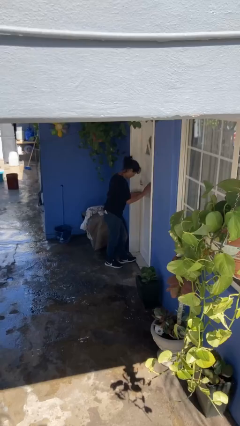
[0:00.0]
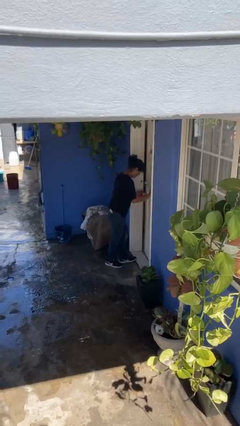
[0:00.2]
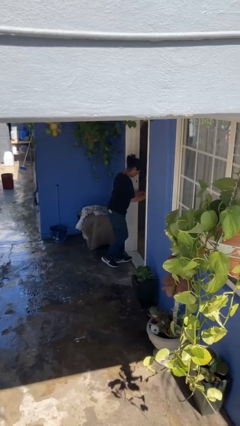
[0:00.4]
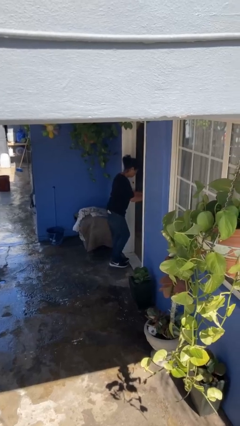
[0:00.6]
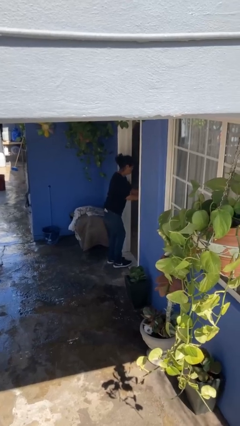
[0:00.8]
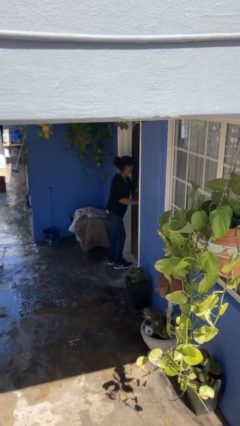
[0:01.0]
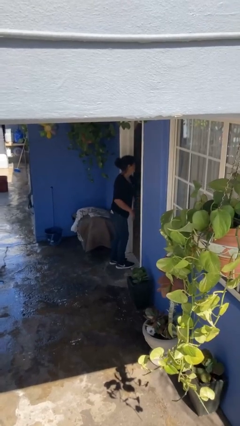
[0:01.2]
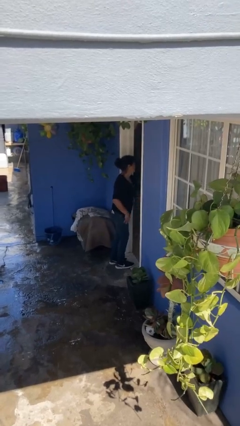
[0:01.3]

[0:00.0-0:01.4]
person opens facility door

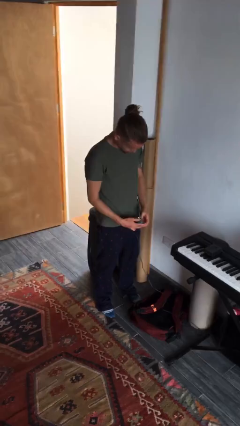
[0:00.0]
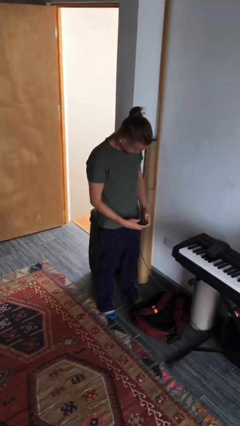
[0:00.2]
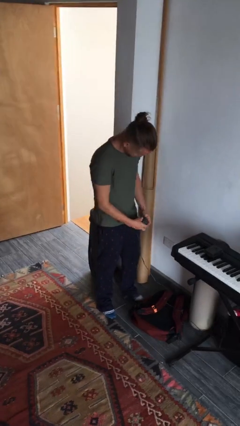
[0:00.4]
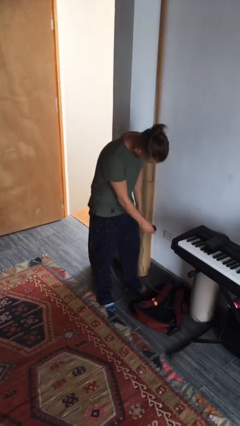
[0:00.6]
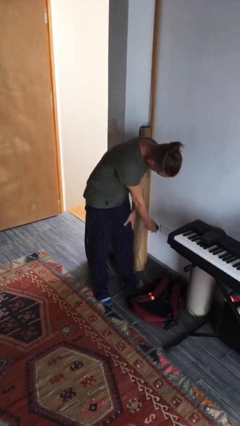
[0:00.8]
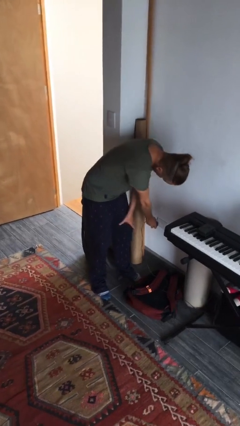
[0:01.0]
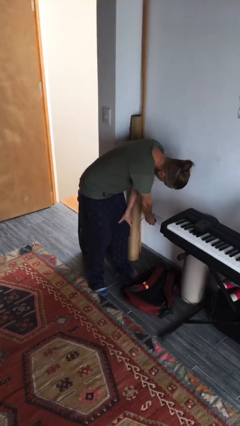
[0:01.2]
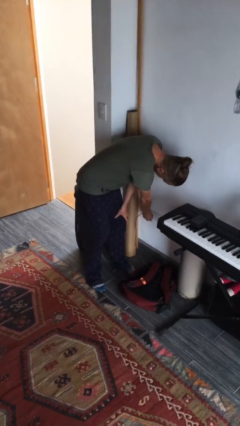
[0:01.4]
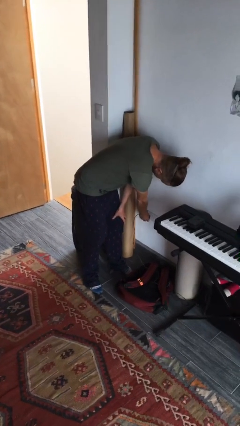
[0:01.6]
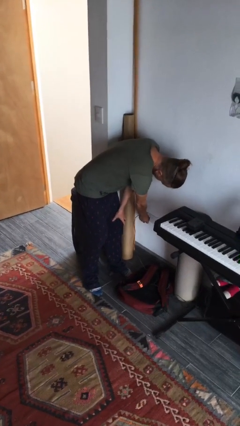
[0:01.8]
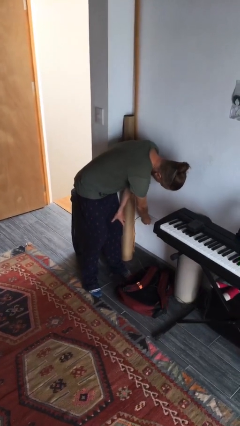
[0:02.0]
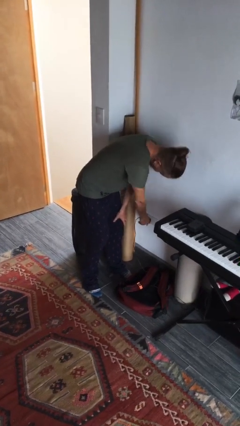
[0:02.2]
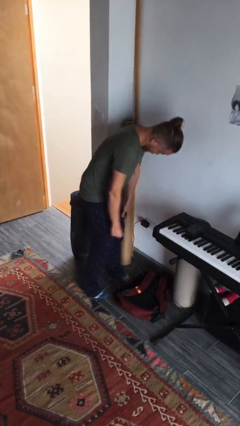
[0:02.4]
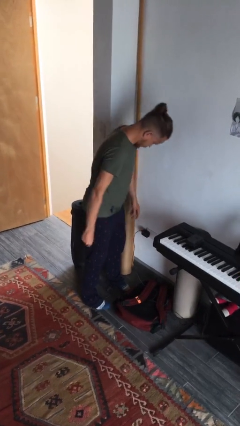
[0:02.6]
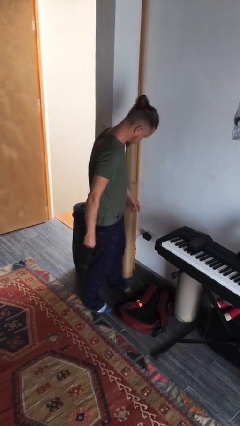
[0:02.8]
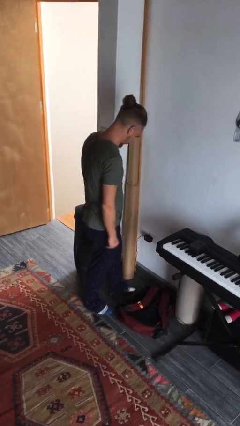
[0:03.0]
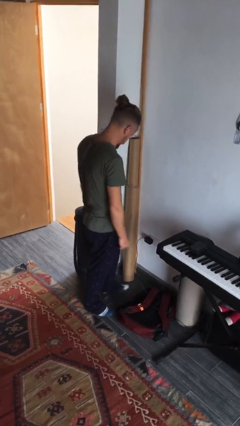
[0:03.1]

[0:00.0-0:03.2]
person plugs into electrical socket

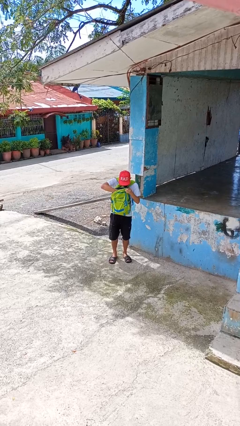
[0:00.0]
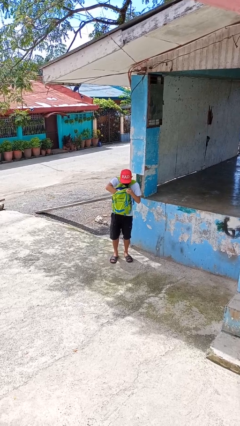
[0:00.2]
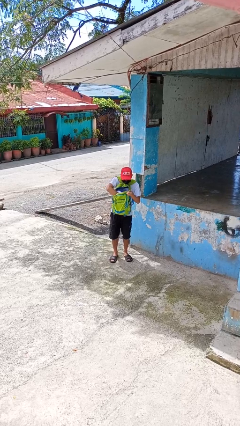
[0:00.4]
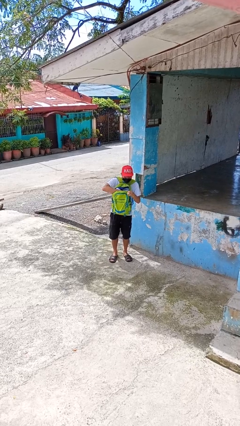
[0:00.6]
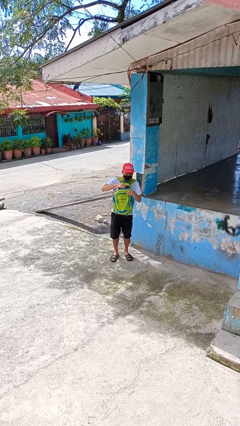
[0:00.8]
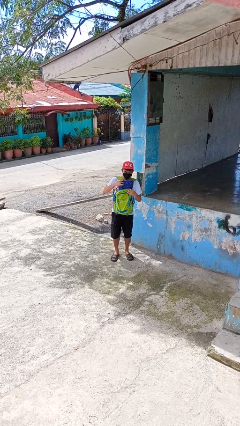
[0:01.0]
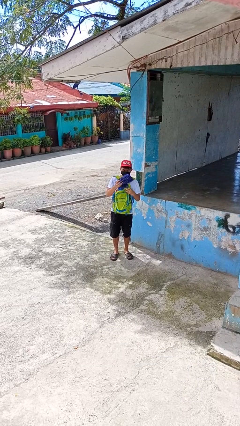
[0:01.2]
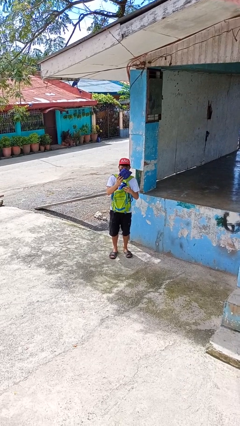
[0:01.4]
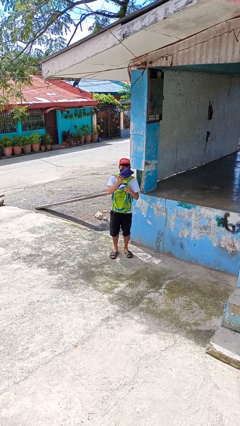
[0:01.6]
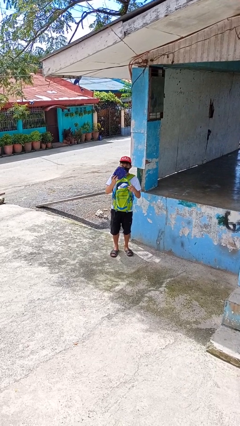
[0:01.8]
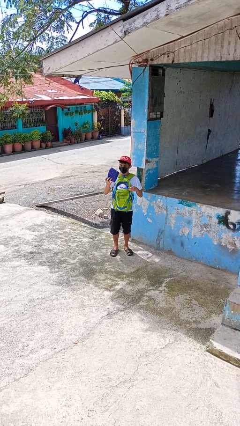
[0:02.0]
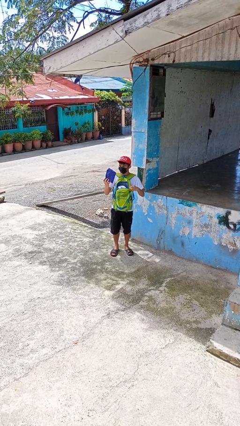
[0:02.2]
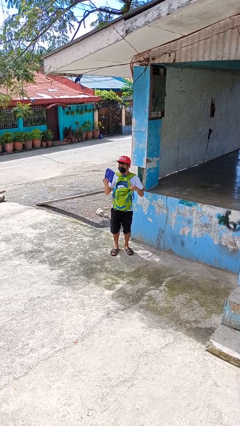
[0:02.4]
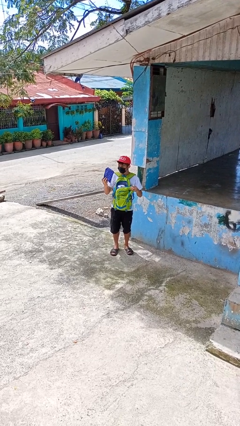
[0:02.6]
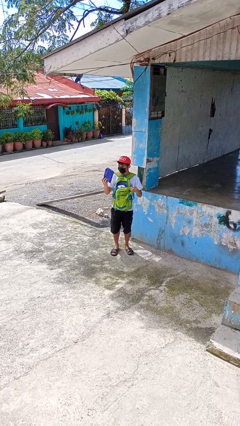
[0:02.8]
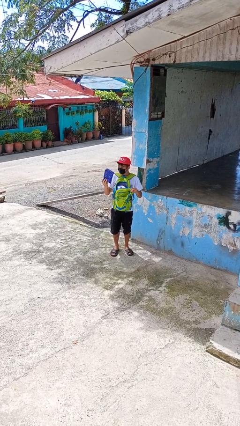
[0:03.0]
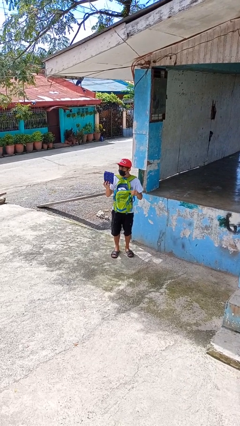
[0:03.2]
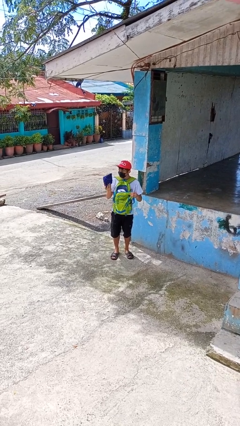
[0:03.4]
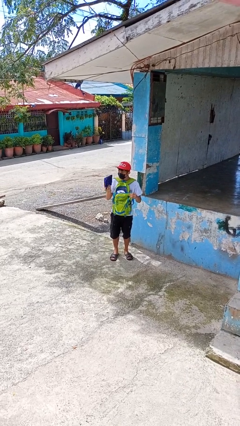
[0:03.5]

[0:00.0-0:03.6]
person takes object from backpack

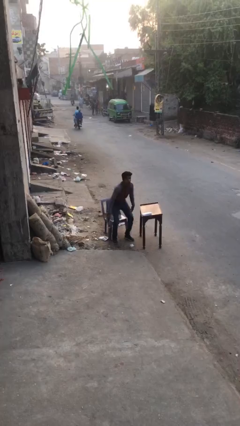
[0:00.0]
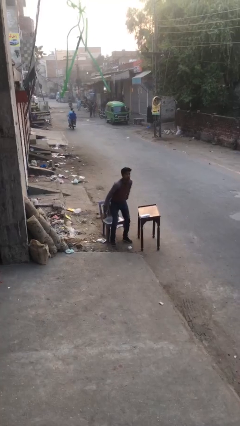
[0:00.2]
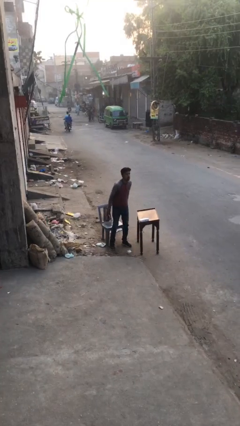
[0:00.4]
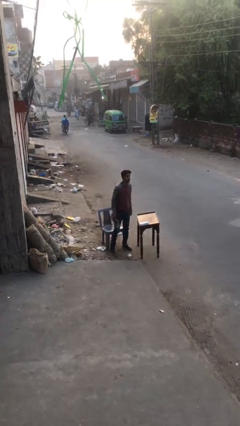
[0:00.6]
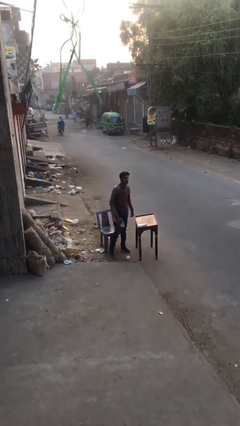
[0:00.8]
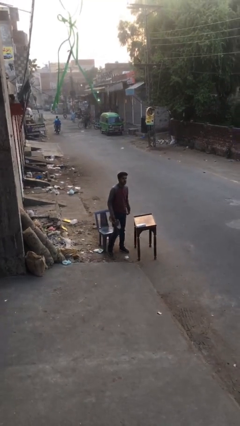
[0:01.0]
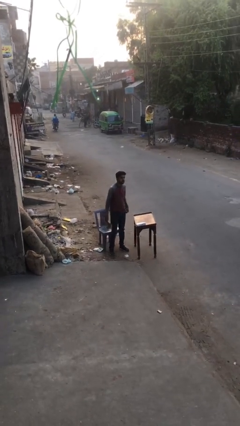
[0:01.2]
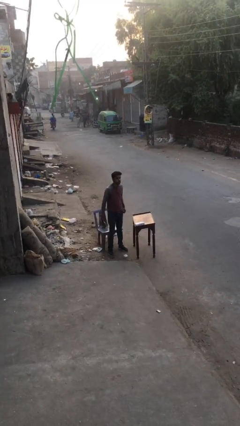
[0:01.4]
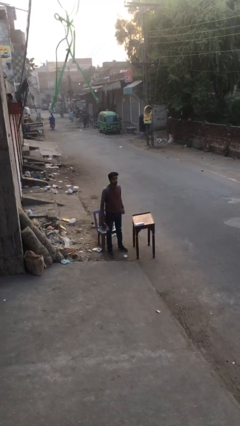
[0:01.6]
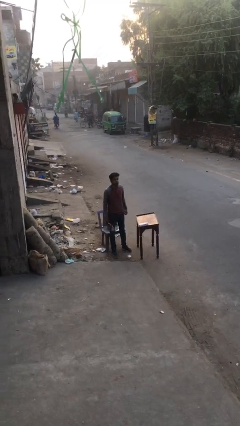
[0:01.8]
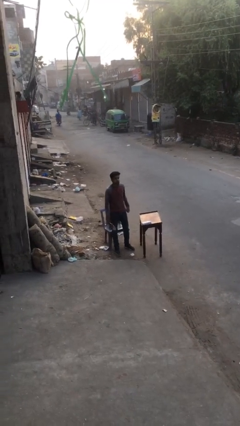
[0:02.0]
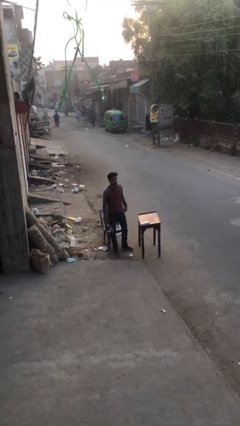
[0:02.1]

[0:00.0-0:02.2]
person stands up

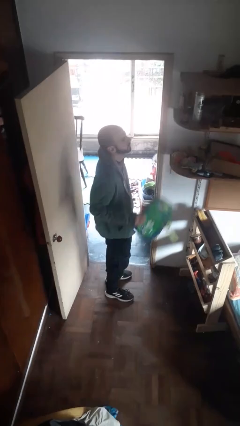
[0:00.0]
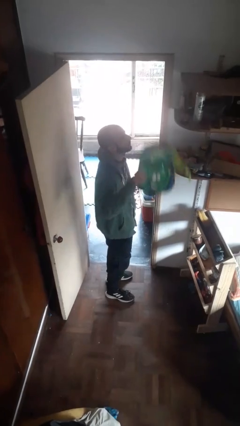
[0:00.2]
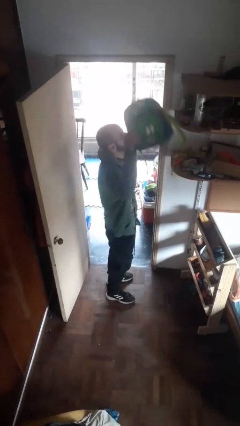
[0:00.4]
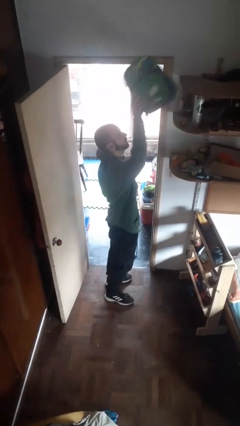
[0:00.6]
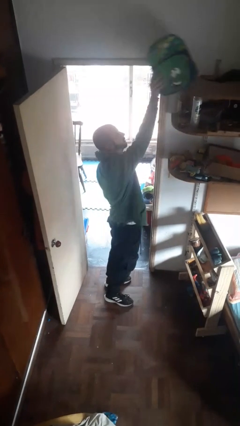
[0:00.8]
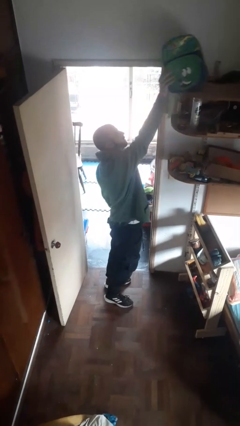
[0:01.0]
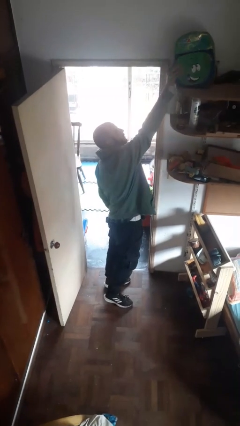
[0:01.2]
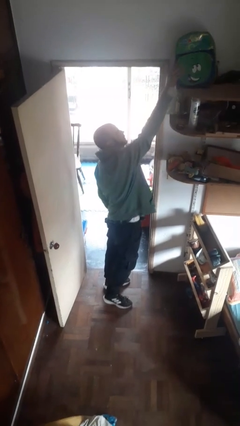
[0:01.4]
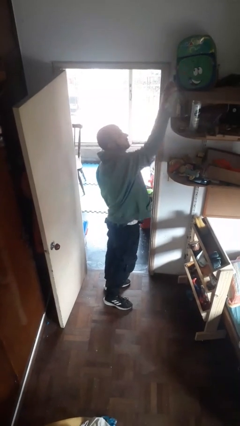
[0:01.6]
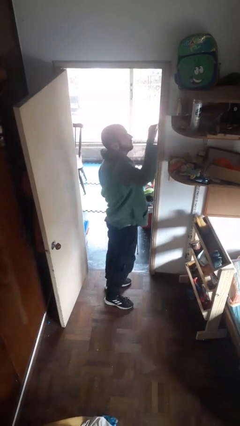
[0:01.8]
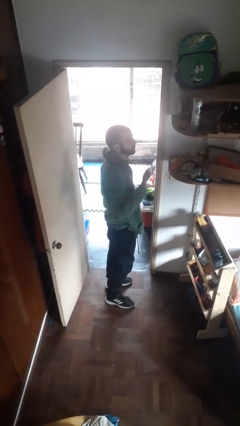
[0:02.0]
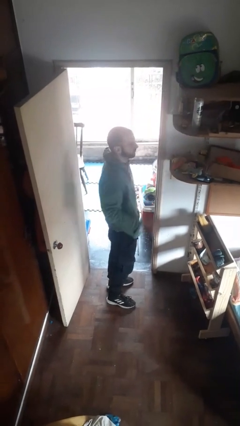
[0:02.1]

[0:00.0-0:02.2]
person picks up object from shelf

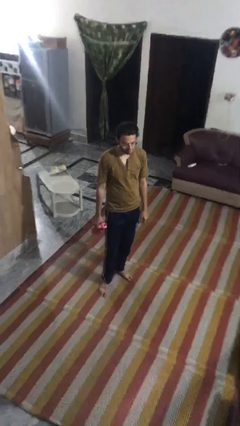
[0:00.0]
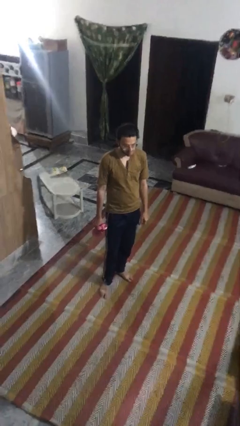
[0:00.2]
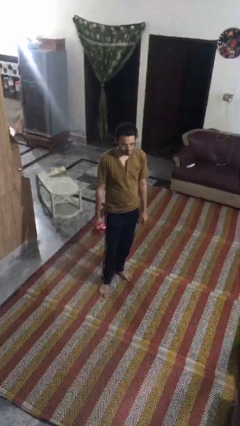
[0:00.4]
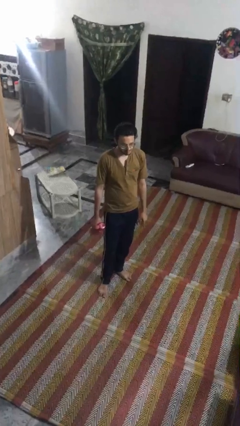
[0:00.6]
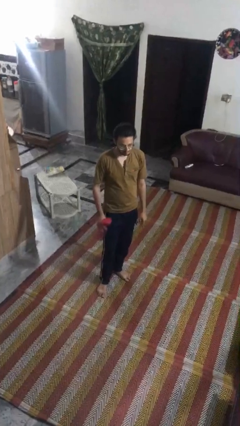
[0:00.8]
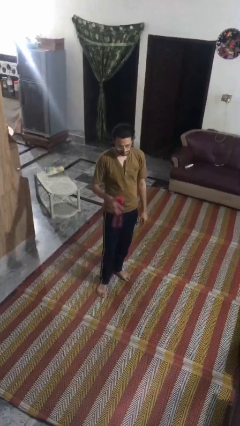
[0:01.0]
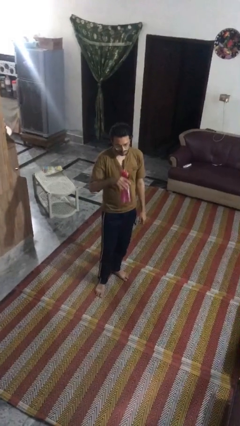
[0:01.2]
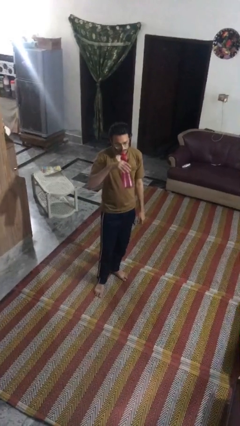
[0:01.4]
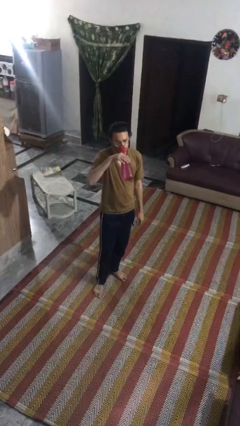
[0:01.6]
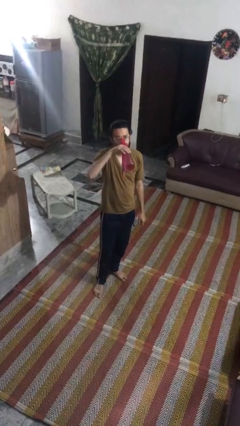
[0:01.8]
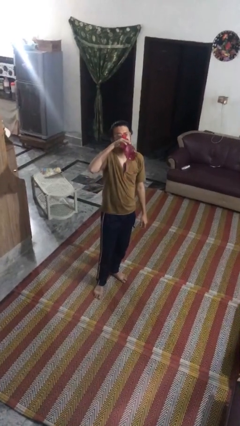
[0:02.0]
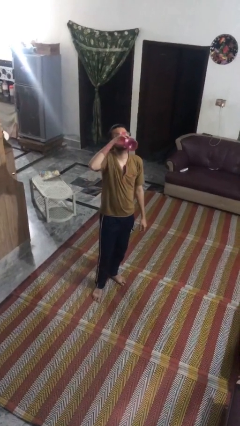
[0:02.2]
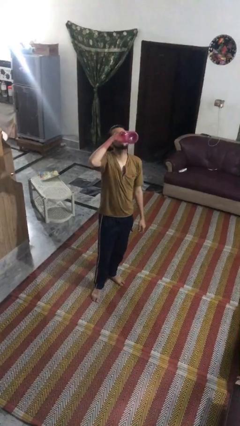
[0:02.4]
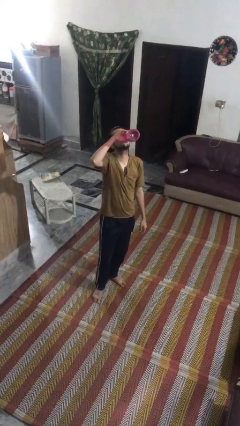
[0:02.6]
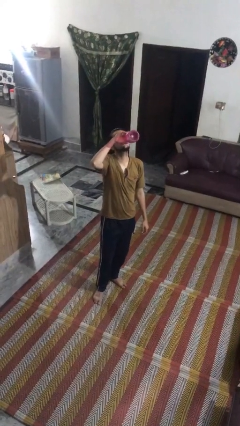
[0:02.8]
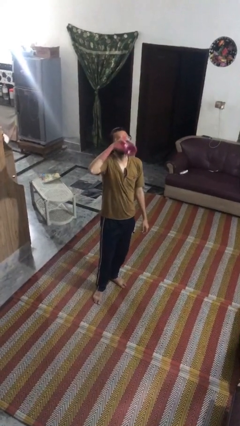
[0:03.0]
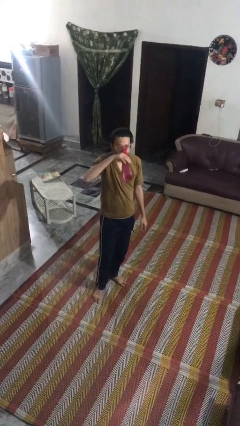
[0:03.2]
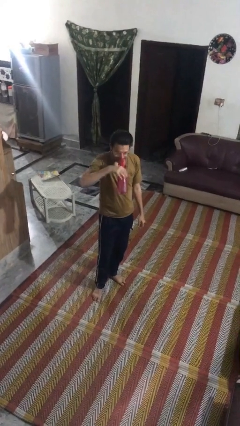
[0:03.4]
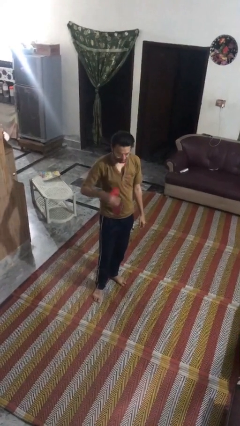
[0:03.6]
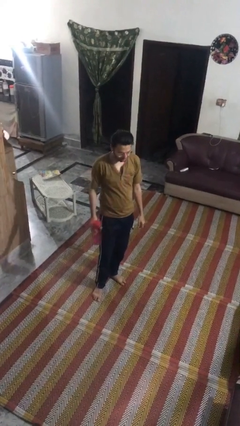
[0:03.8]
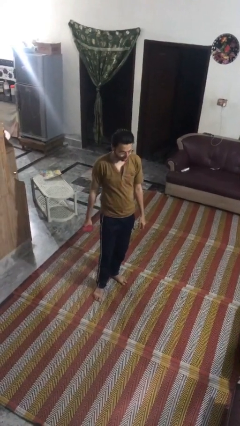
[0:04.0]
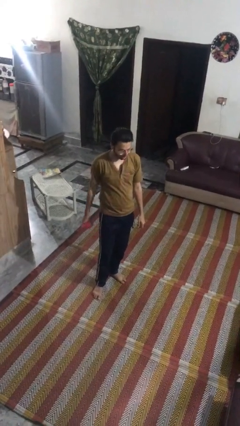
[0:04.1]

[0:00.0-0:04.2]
person drinks from bottle

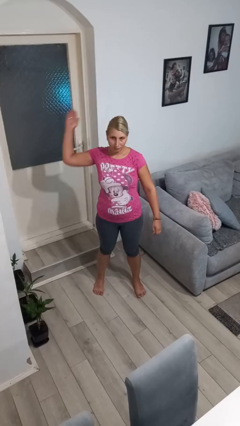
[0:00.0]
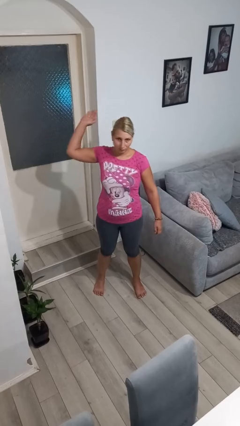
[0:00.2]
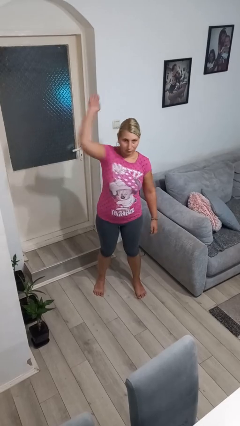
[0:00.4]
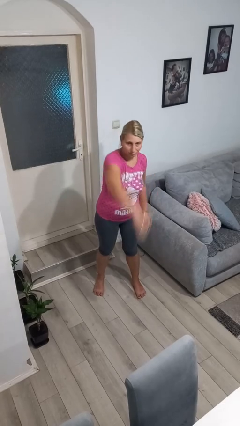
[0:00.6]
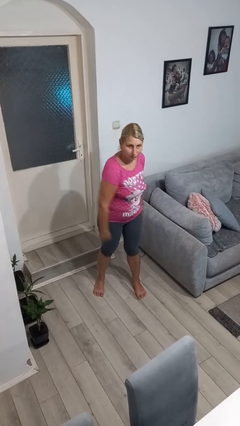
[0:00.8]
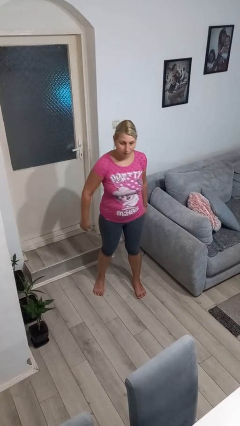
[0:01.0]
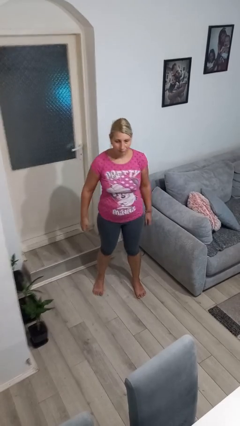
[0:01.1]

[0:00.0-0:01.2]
person punches
